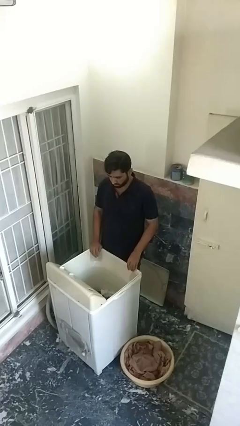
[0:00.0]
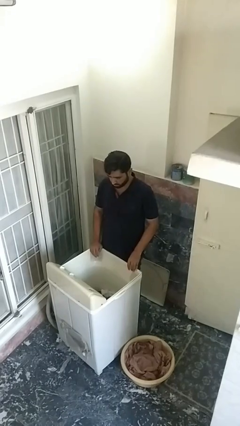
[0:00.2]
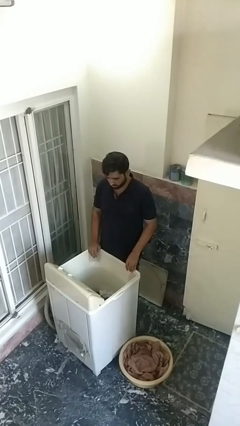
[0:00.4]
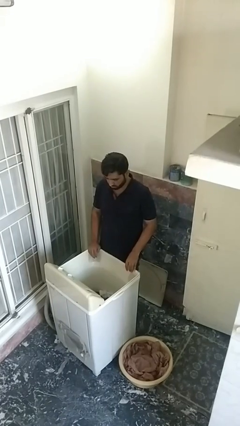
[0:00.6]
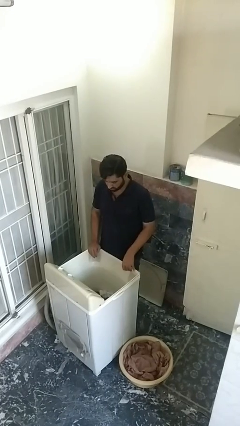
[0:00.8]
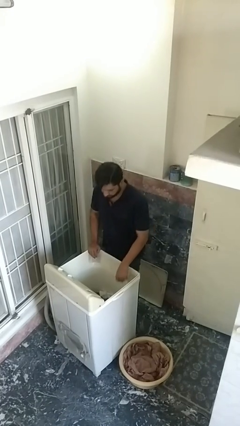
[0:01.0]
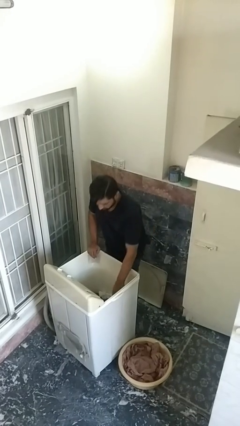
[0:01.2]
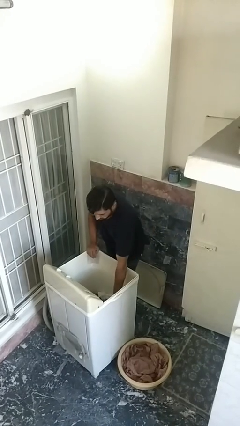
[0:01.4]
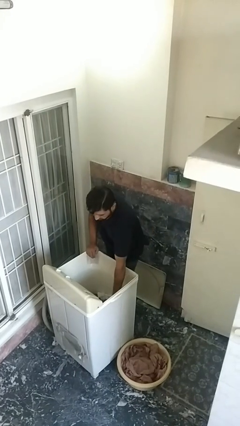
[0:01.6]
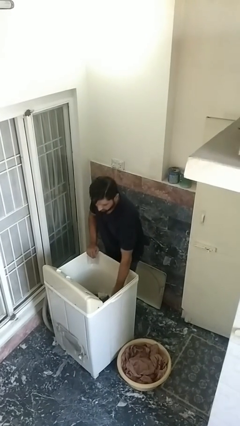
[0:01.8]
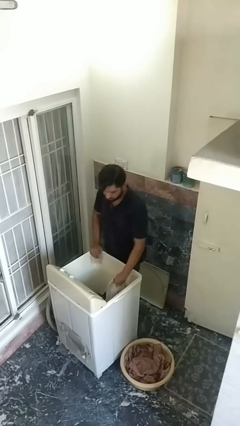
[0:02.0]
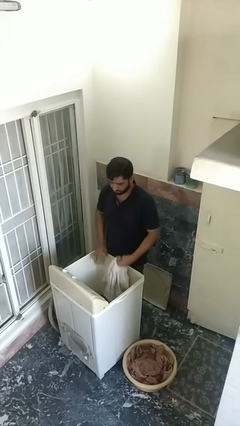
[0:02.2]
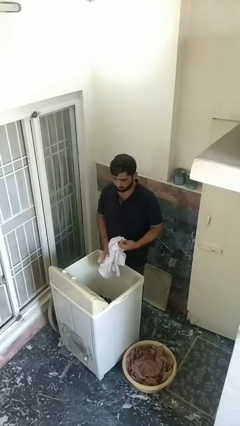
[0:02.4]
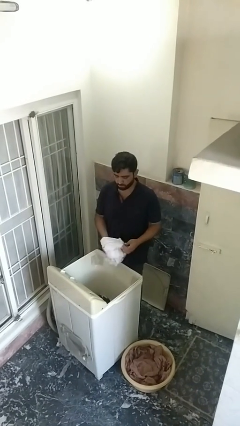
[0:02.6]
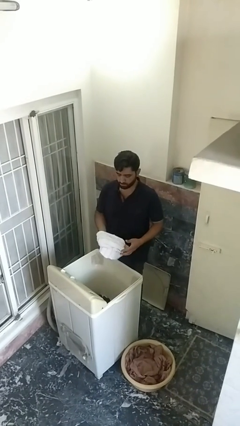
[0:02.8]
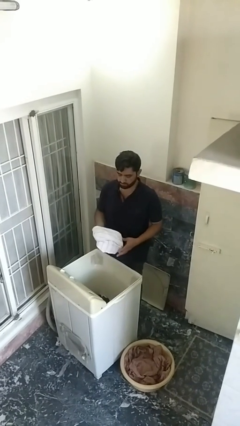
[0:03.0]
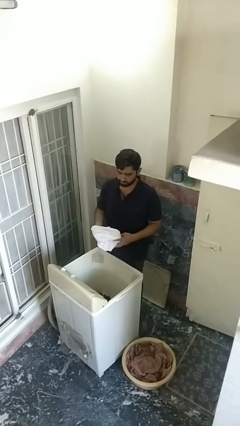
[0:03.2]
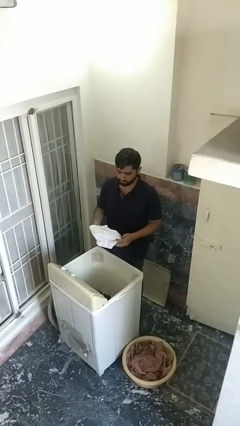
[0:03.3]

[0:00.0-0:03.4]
person unloads clotheswasher

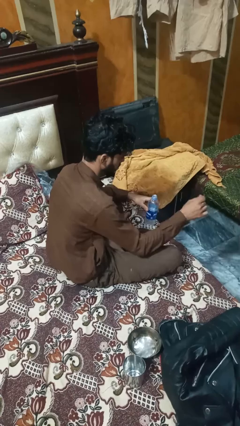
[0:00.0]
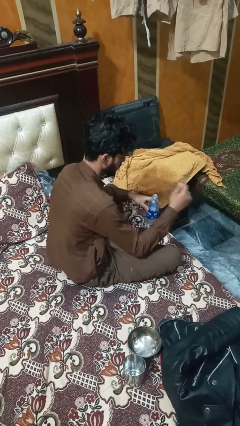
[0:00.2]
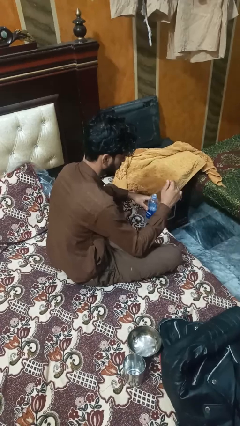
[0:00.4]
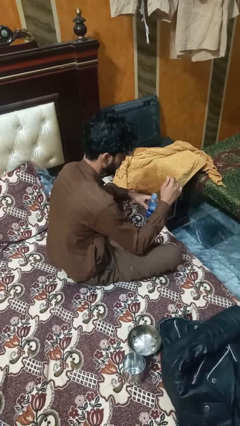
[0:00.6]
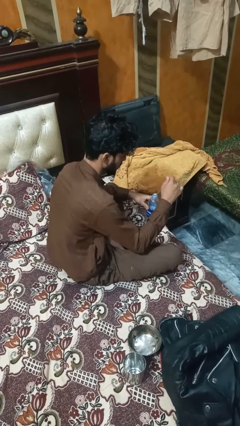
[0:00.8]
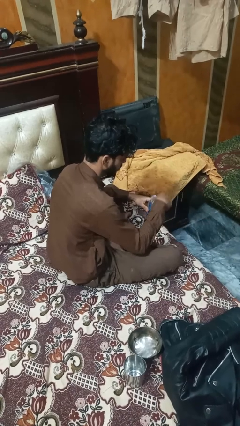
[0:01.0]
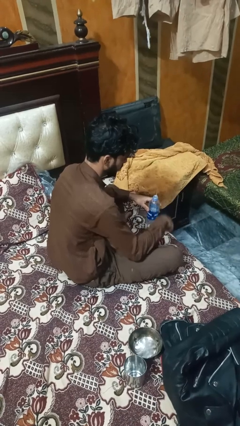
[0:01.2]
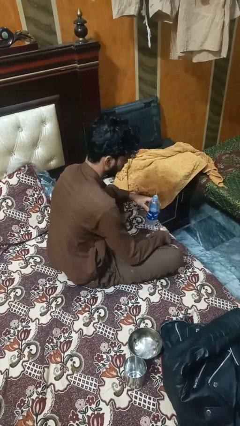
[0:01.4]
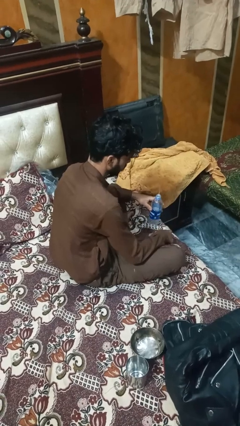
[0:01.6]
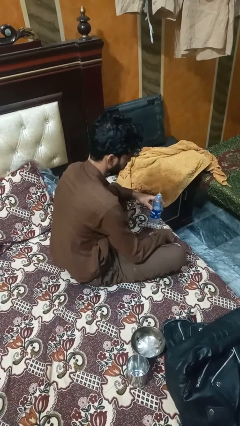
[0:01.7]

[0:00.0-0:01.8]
person screws lid to bottle

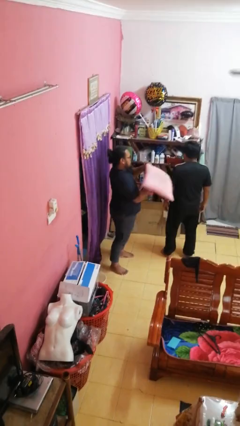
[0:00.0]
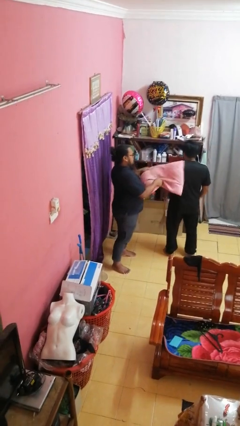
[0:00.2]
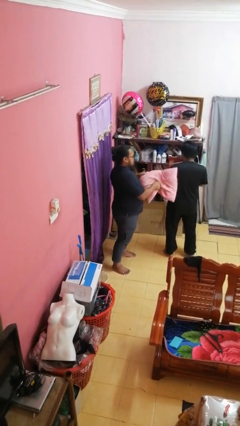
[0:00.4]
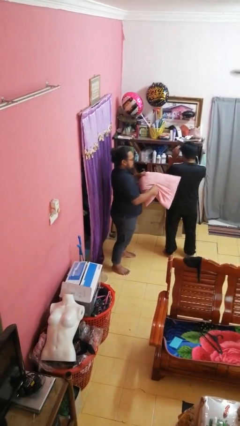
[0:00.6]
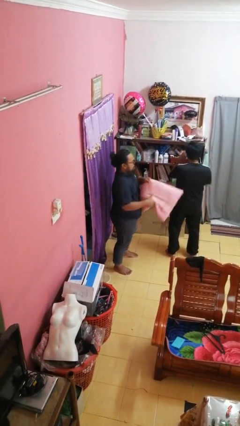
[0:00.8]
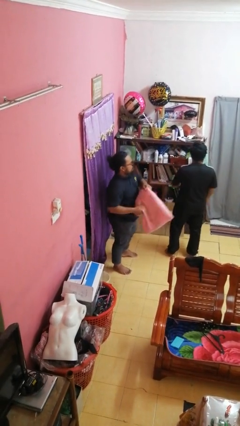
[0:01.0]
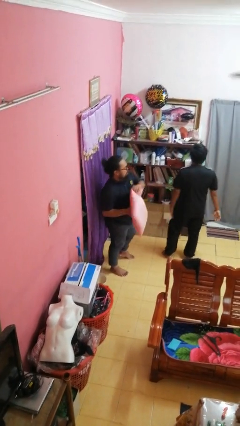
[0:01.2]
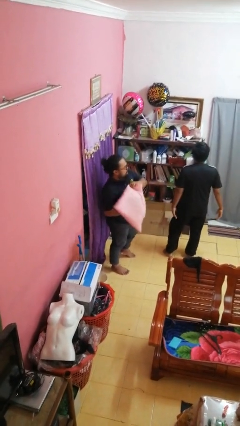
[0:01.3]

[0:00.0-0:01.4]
person hits person with pillow

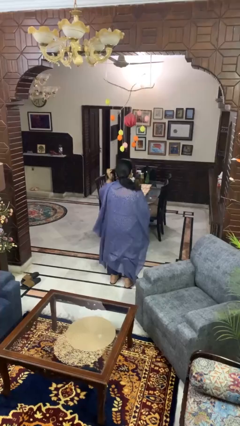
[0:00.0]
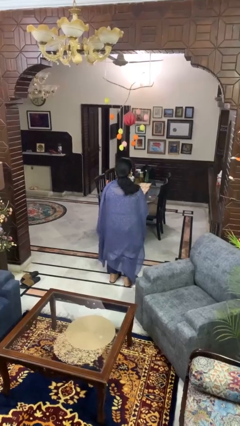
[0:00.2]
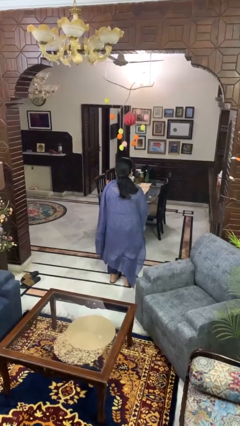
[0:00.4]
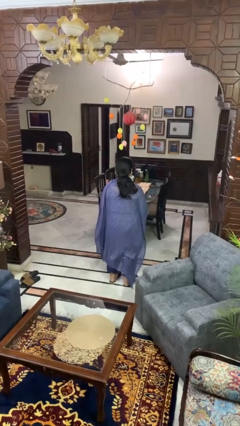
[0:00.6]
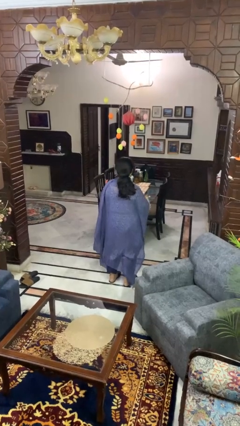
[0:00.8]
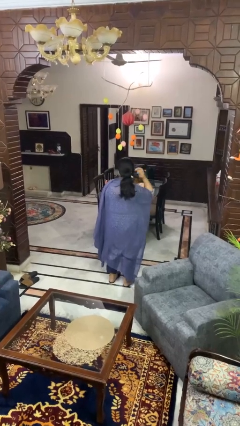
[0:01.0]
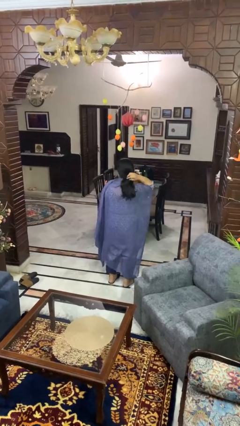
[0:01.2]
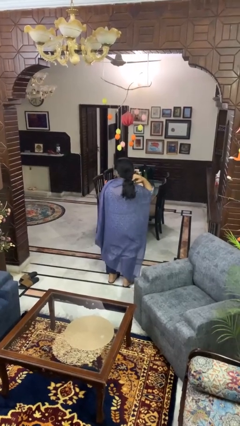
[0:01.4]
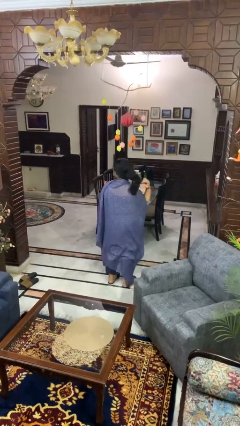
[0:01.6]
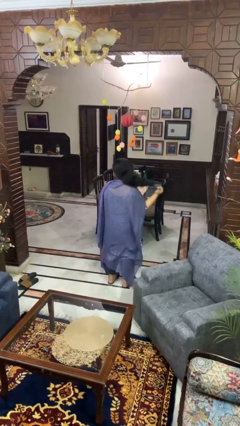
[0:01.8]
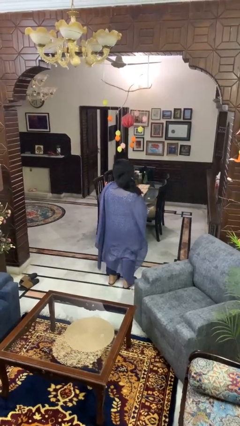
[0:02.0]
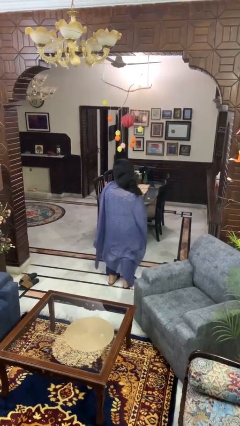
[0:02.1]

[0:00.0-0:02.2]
person takes off hairtie

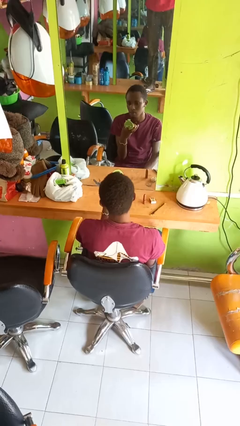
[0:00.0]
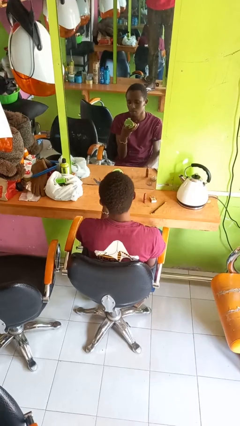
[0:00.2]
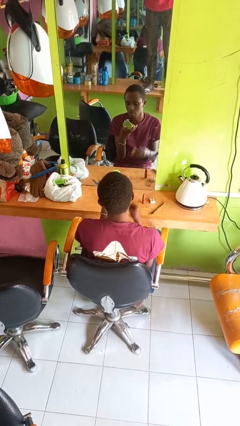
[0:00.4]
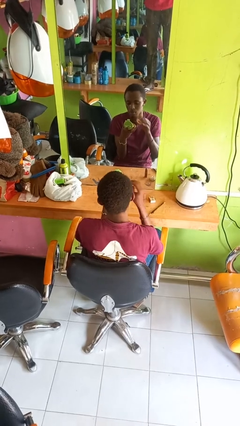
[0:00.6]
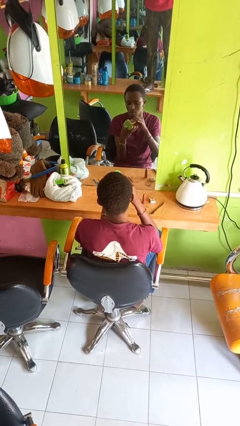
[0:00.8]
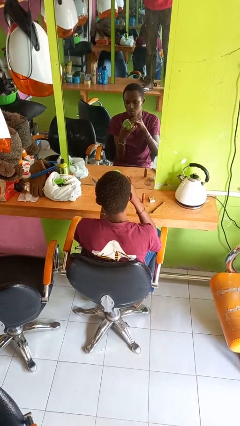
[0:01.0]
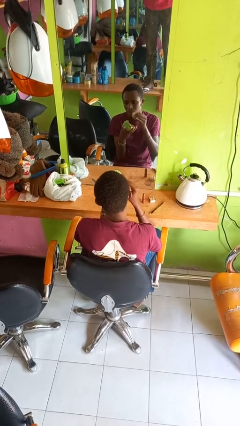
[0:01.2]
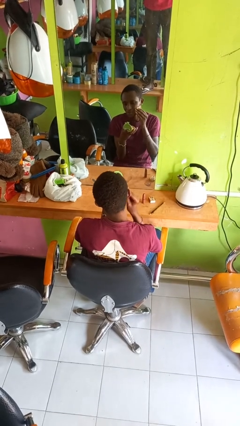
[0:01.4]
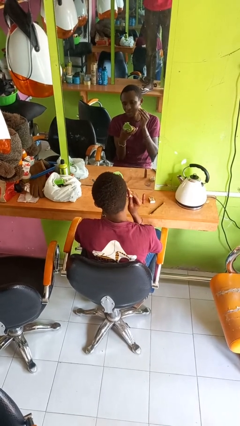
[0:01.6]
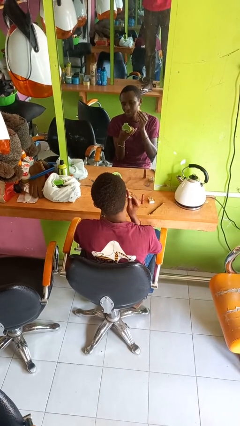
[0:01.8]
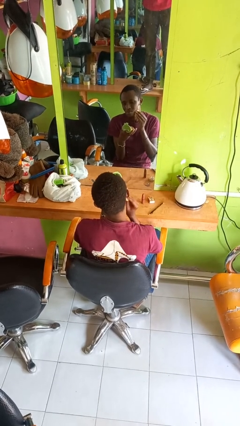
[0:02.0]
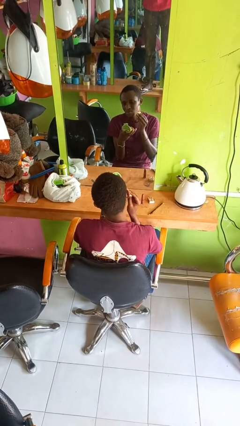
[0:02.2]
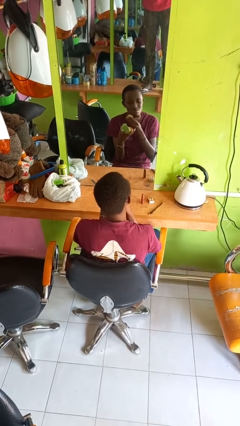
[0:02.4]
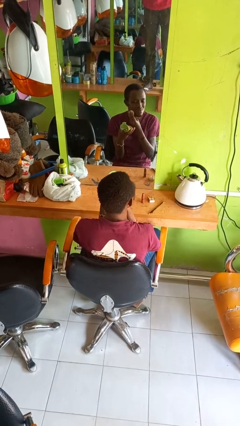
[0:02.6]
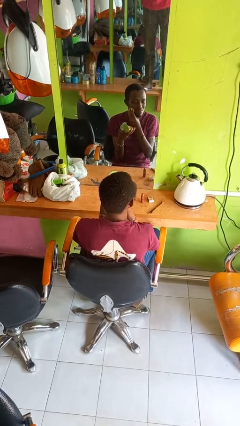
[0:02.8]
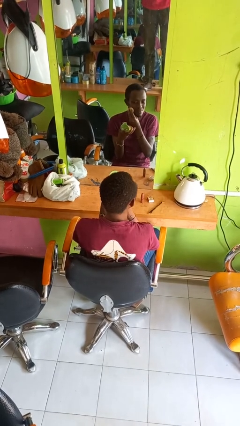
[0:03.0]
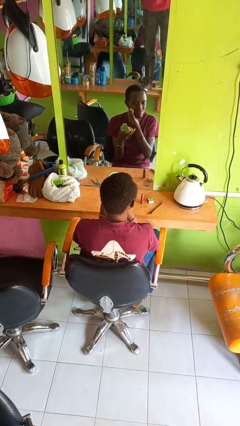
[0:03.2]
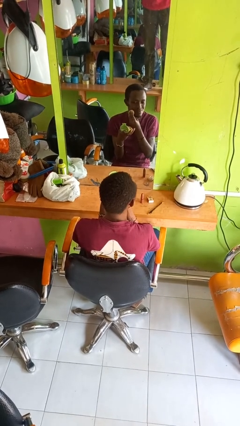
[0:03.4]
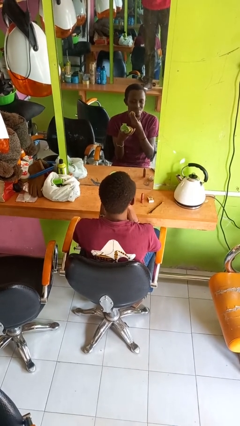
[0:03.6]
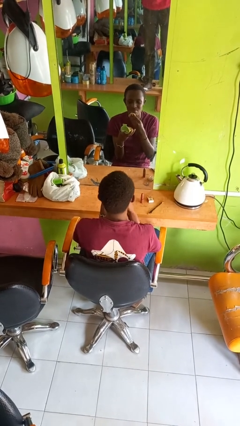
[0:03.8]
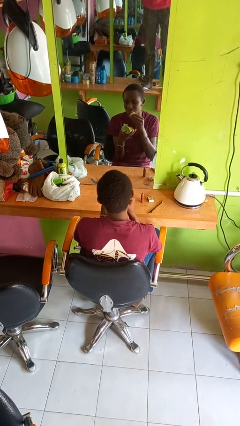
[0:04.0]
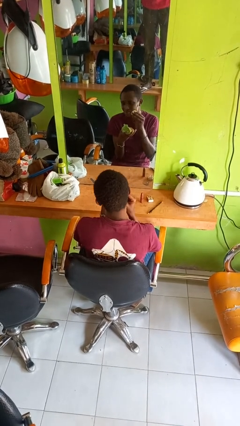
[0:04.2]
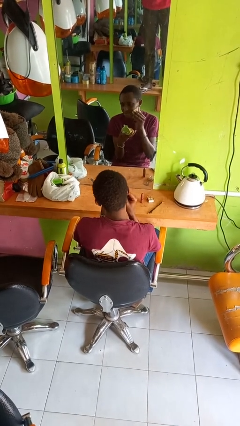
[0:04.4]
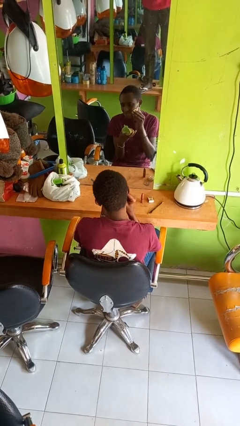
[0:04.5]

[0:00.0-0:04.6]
person applies foundation makeup

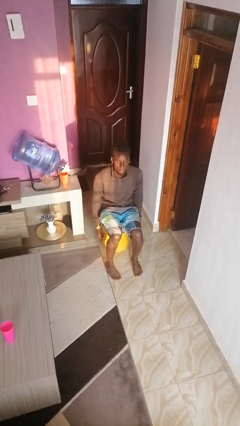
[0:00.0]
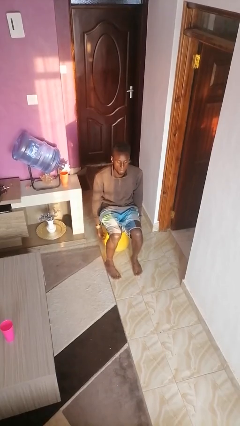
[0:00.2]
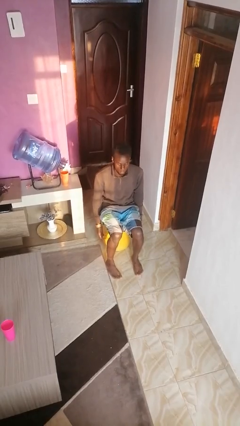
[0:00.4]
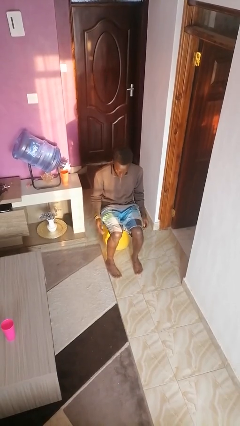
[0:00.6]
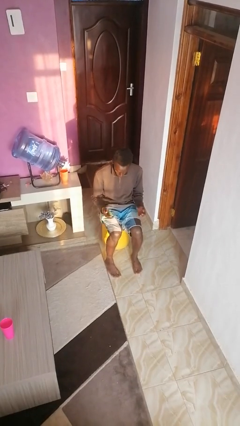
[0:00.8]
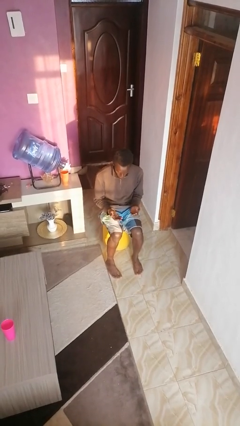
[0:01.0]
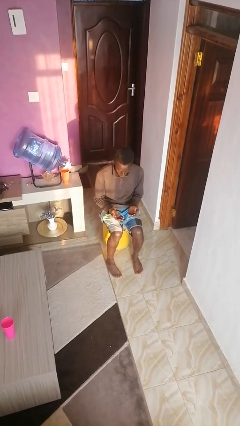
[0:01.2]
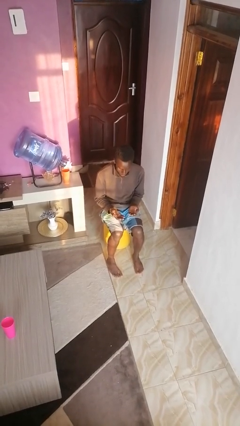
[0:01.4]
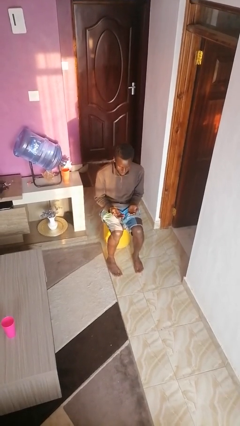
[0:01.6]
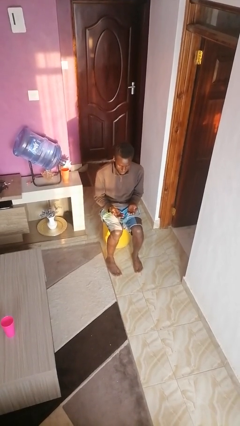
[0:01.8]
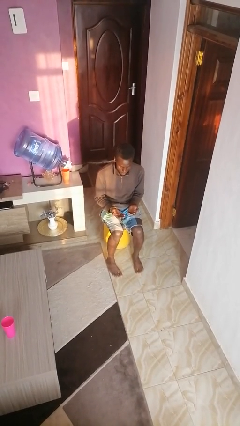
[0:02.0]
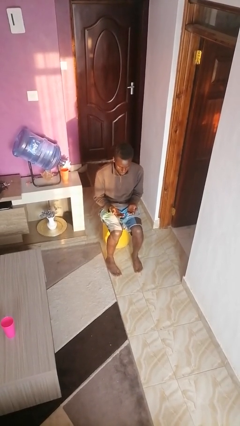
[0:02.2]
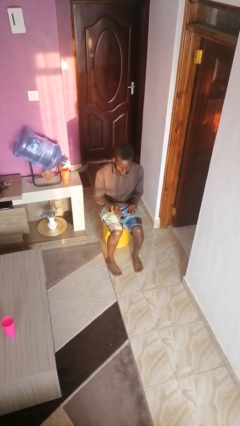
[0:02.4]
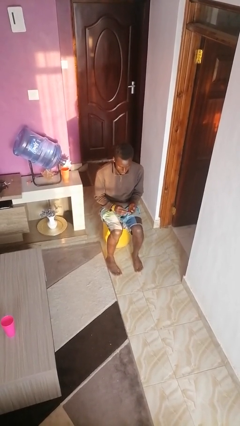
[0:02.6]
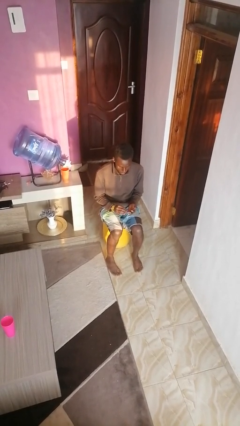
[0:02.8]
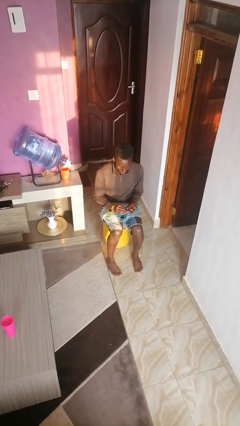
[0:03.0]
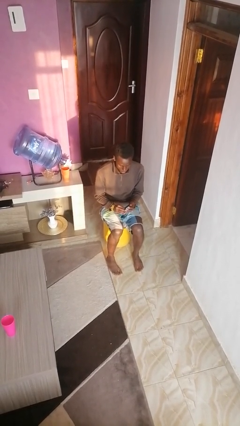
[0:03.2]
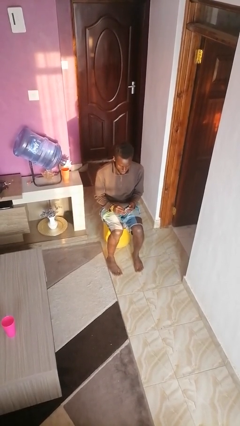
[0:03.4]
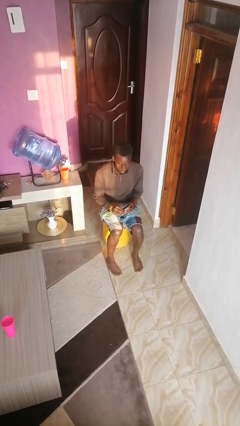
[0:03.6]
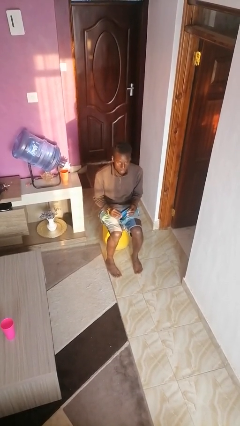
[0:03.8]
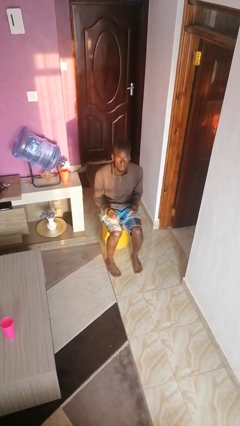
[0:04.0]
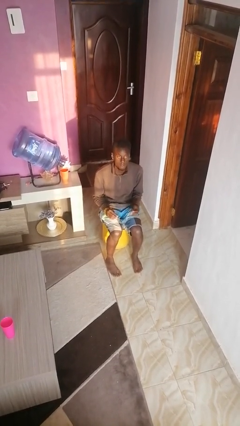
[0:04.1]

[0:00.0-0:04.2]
person looks at hands in lap
